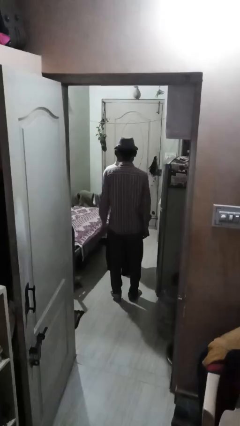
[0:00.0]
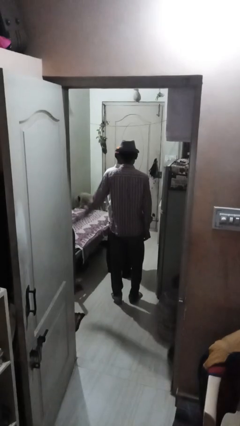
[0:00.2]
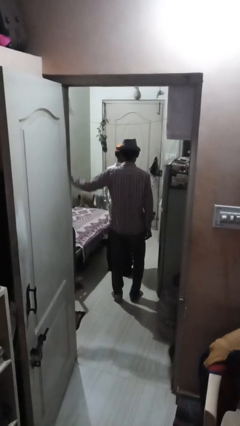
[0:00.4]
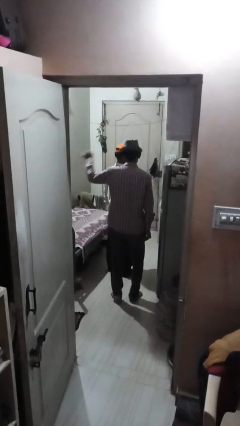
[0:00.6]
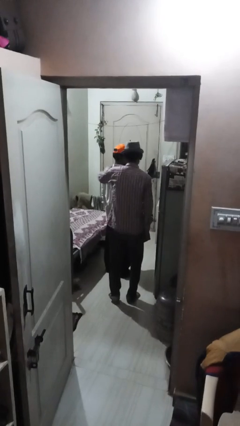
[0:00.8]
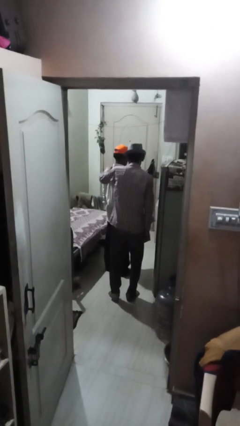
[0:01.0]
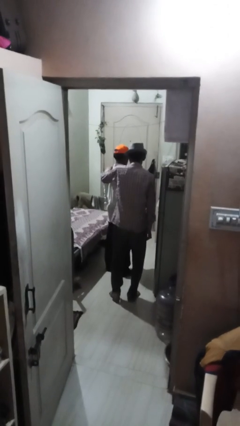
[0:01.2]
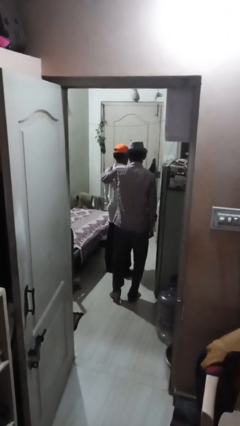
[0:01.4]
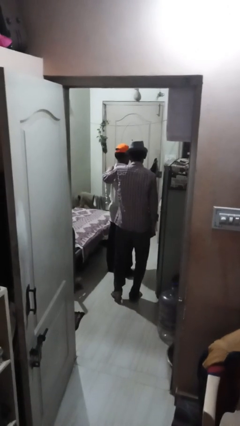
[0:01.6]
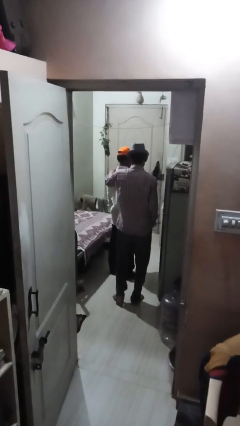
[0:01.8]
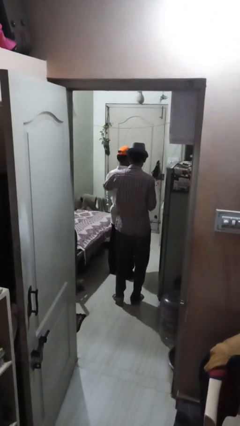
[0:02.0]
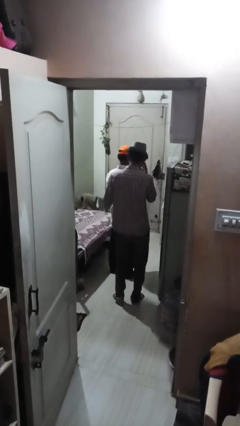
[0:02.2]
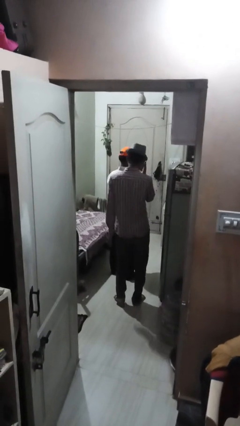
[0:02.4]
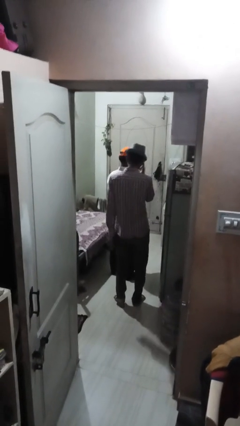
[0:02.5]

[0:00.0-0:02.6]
person touches back of person

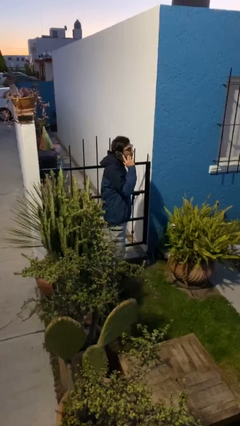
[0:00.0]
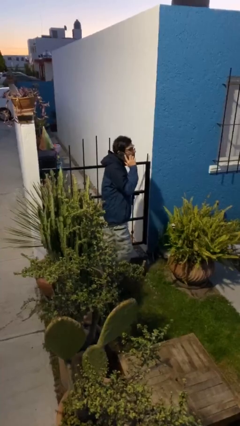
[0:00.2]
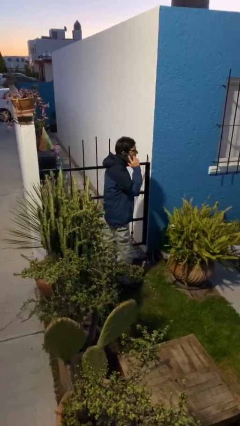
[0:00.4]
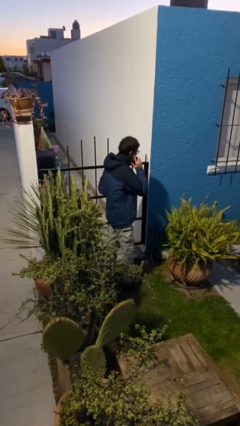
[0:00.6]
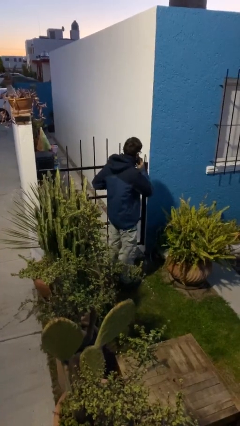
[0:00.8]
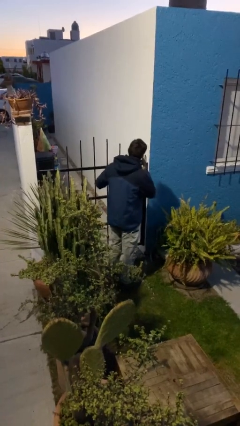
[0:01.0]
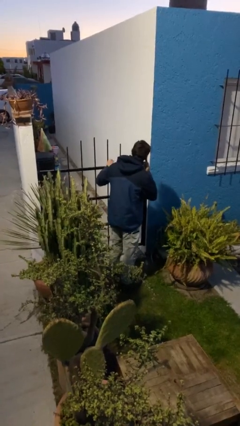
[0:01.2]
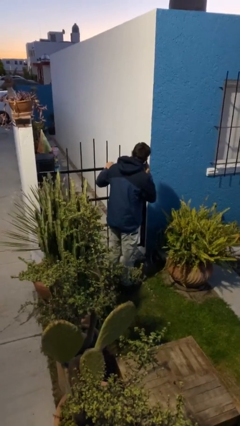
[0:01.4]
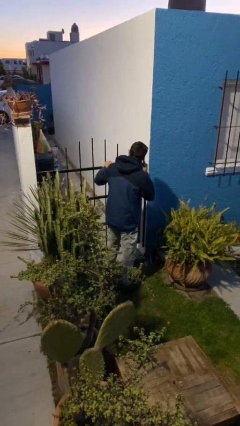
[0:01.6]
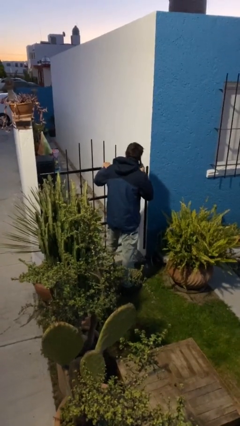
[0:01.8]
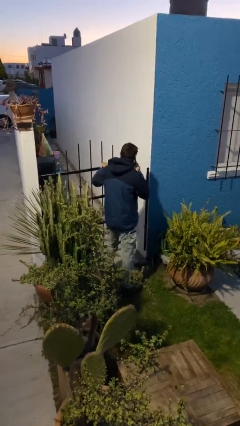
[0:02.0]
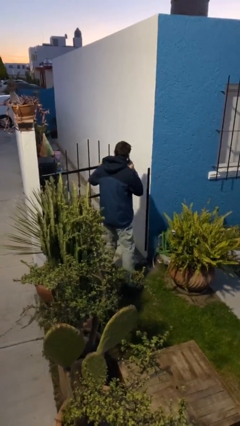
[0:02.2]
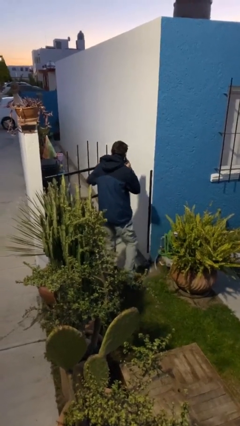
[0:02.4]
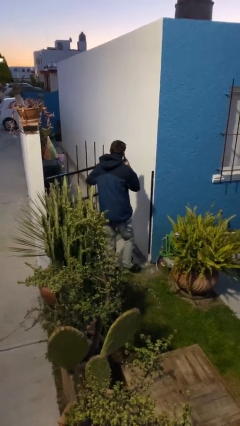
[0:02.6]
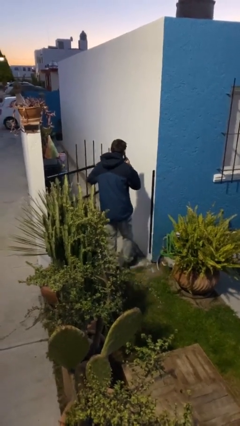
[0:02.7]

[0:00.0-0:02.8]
person opens facility door

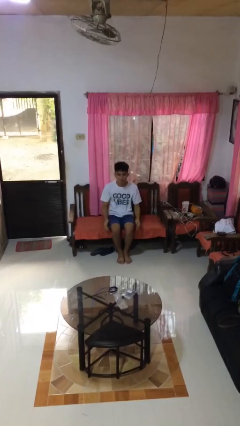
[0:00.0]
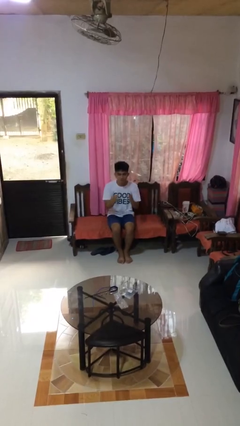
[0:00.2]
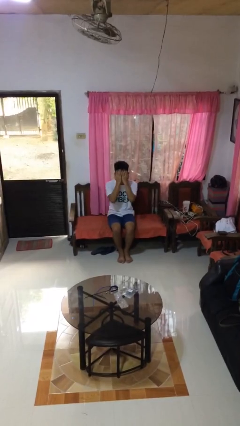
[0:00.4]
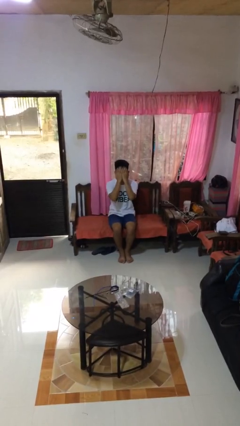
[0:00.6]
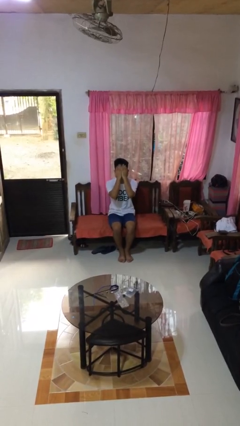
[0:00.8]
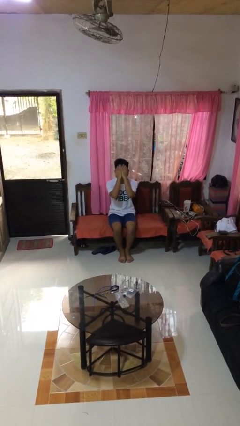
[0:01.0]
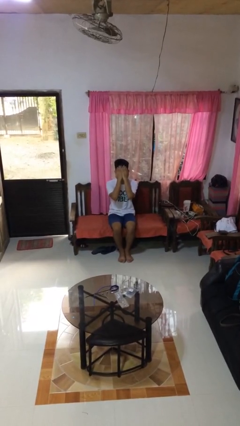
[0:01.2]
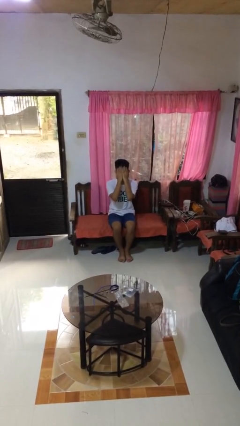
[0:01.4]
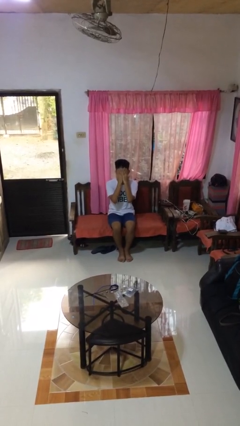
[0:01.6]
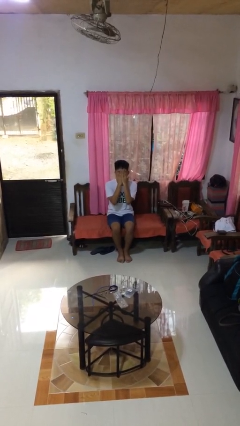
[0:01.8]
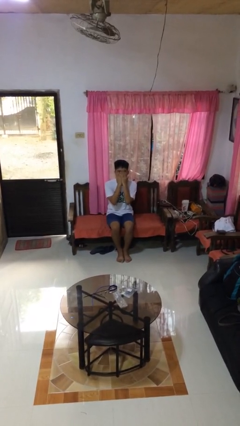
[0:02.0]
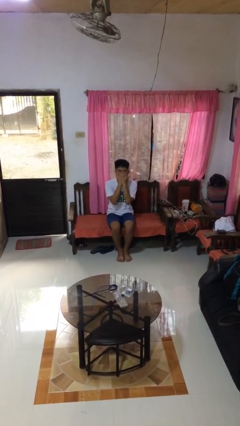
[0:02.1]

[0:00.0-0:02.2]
person covers face with hands

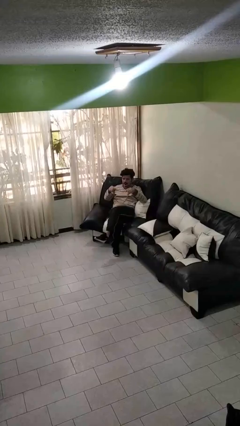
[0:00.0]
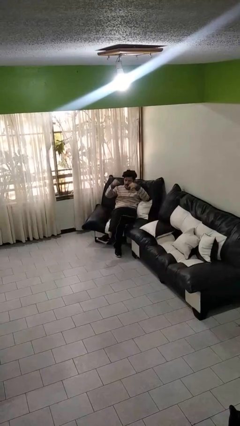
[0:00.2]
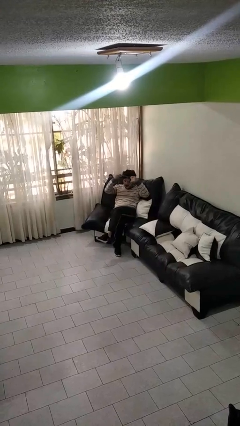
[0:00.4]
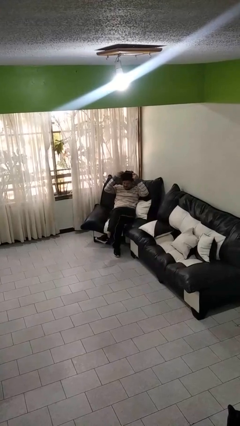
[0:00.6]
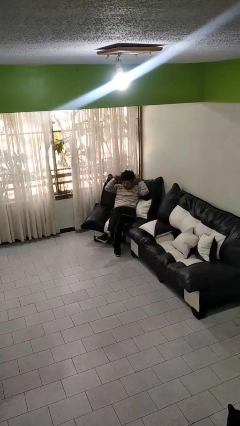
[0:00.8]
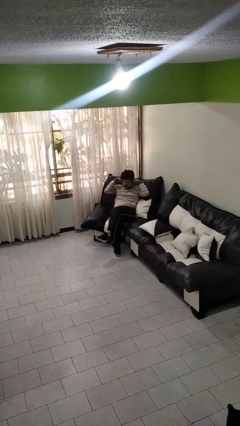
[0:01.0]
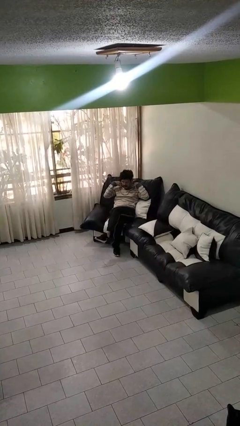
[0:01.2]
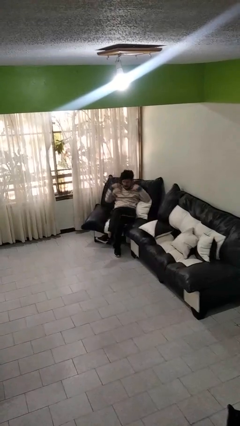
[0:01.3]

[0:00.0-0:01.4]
person puts on necklace

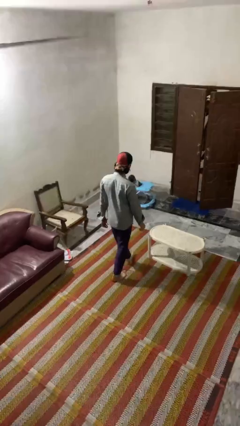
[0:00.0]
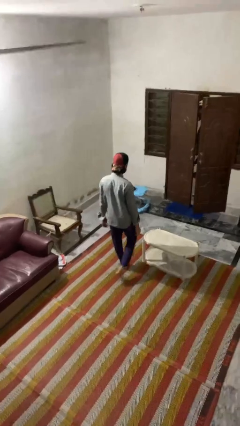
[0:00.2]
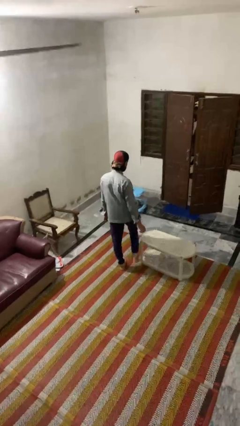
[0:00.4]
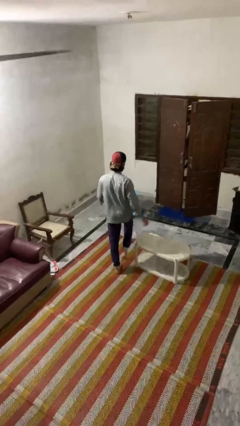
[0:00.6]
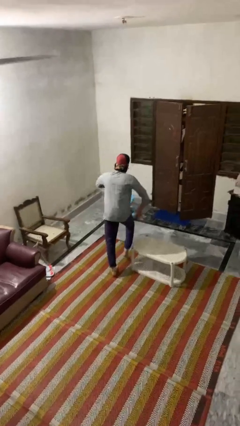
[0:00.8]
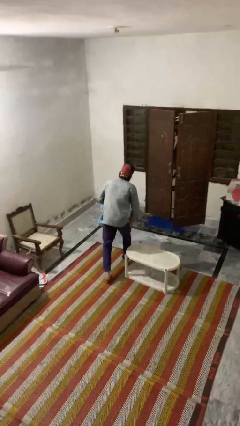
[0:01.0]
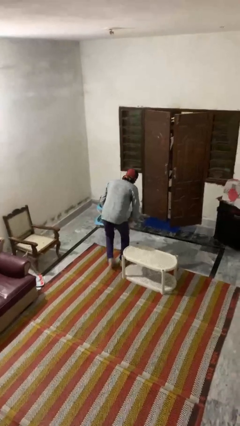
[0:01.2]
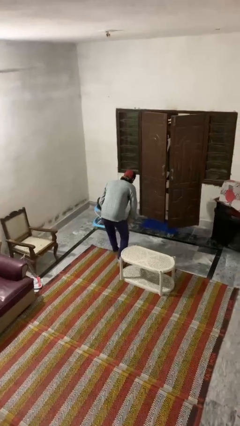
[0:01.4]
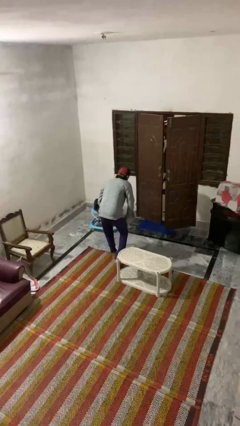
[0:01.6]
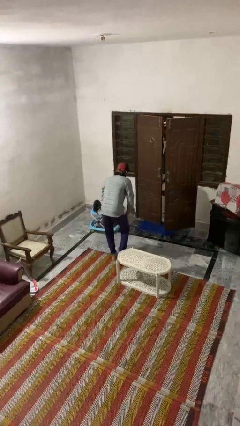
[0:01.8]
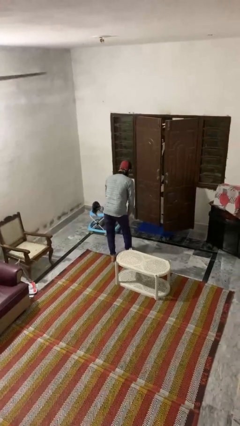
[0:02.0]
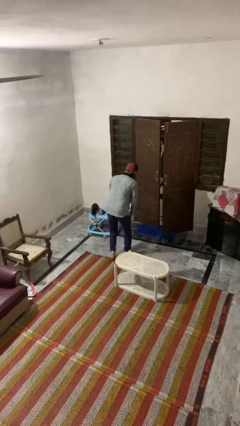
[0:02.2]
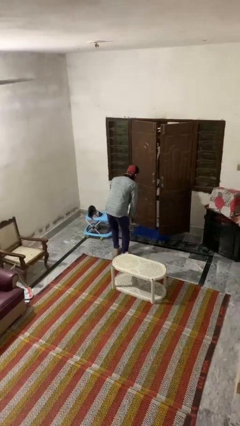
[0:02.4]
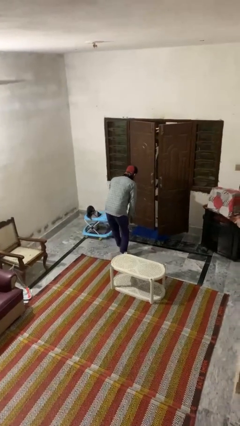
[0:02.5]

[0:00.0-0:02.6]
person bumps into table

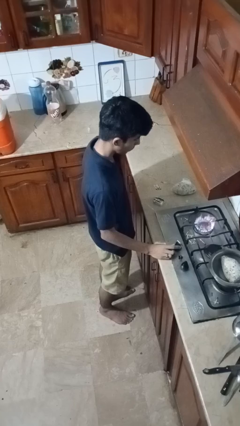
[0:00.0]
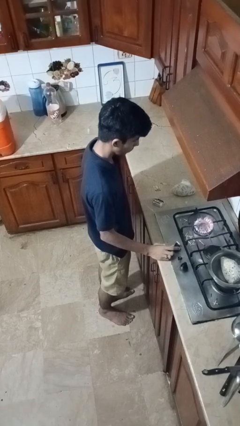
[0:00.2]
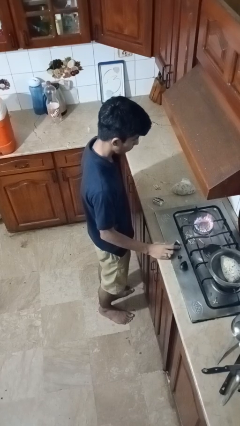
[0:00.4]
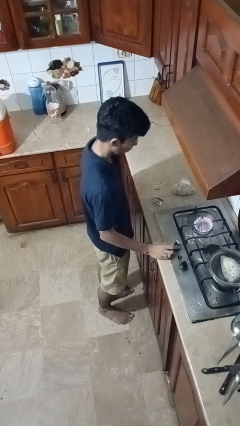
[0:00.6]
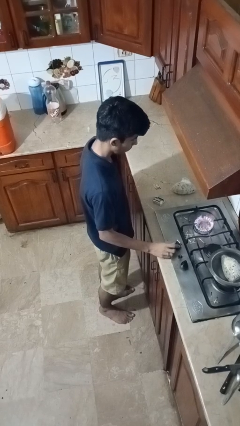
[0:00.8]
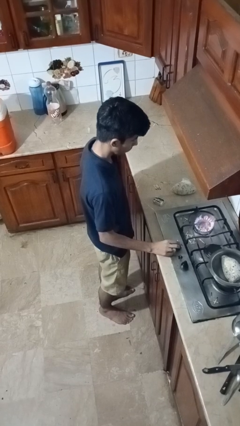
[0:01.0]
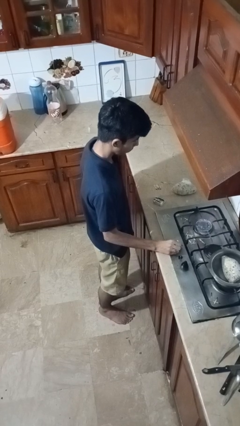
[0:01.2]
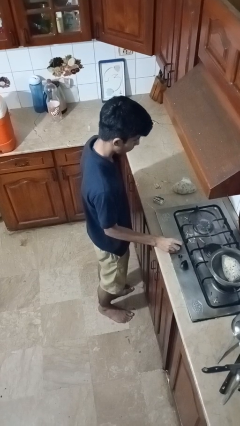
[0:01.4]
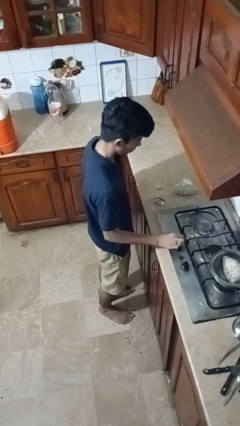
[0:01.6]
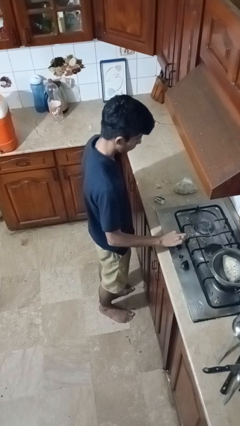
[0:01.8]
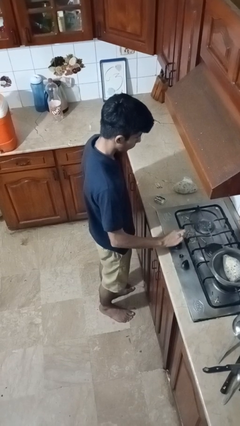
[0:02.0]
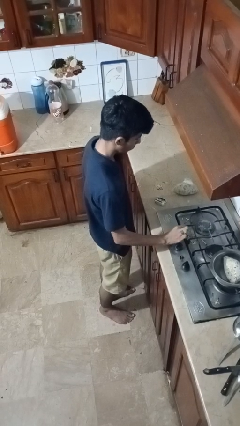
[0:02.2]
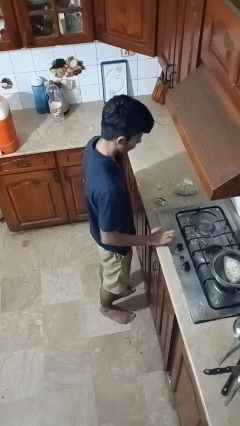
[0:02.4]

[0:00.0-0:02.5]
person turns off stovetop

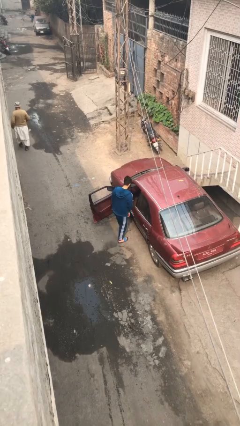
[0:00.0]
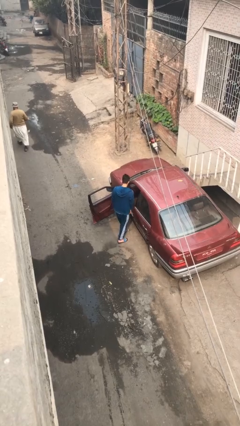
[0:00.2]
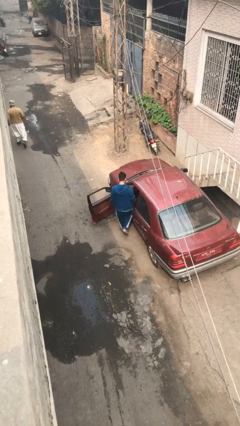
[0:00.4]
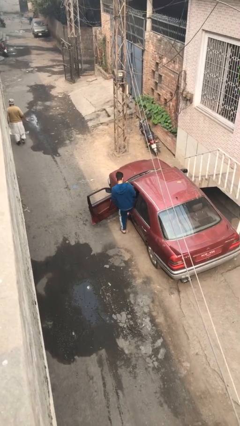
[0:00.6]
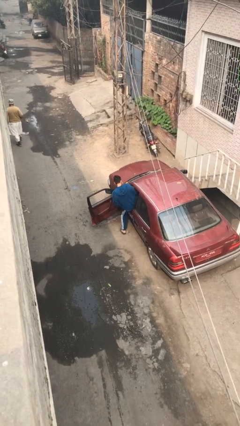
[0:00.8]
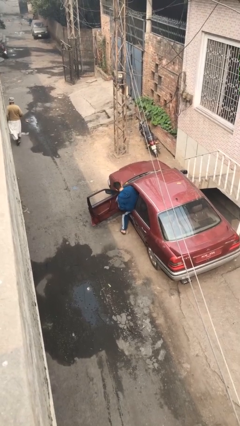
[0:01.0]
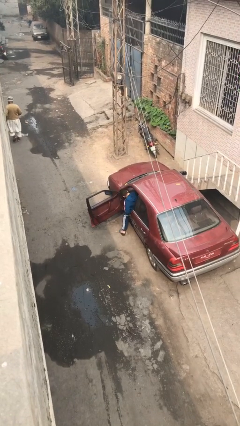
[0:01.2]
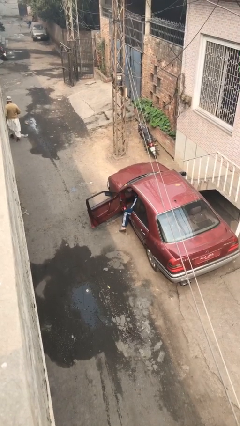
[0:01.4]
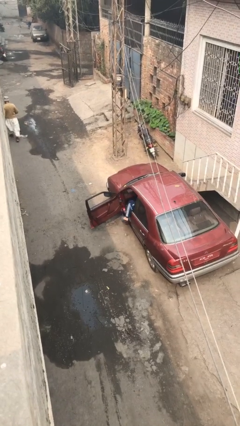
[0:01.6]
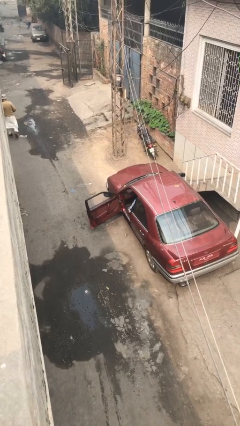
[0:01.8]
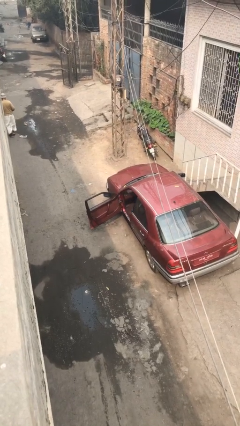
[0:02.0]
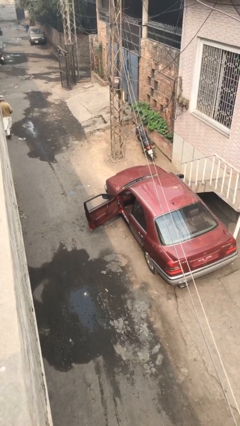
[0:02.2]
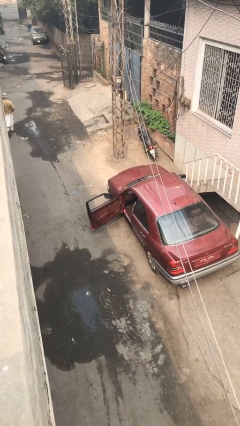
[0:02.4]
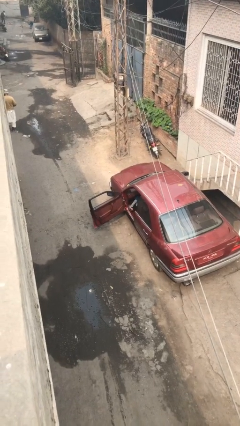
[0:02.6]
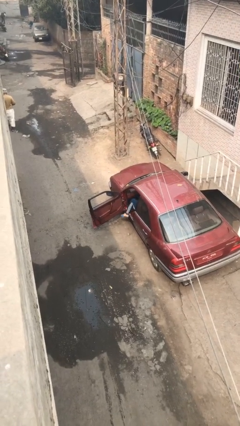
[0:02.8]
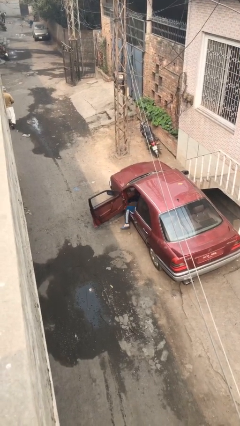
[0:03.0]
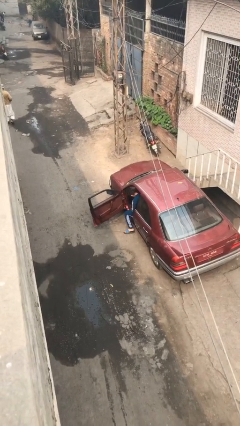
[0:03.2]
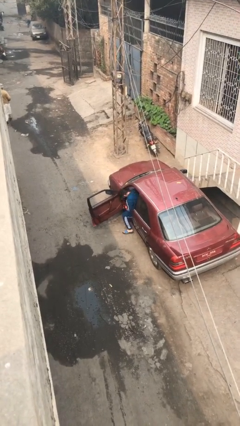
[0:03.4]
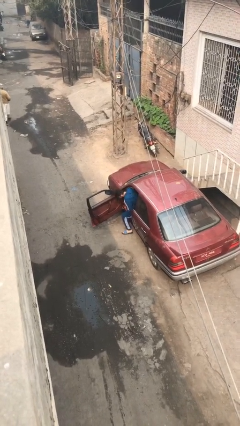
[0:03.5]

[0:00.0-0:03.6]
person enters car
